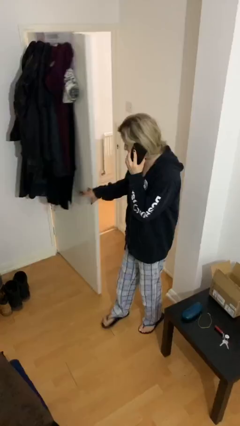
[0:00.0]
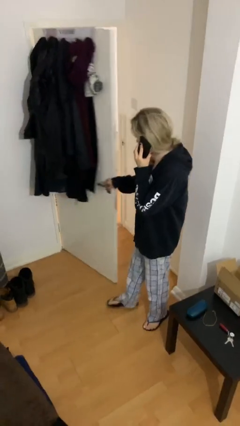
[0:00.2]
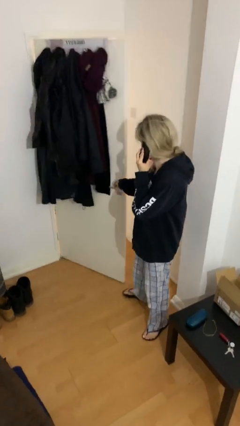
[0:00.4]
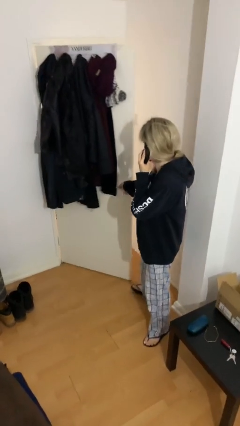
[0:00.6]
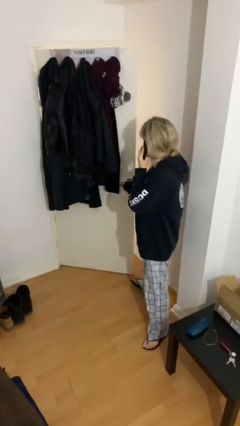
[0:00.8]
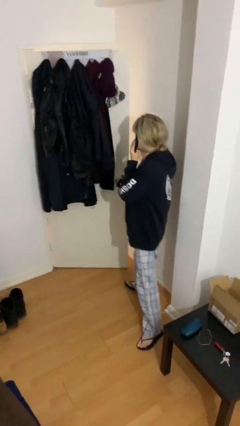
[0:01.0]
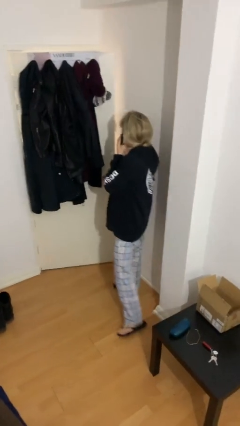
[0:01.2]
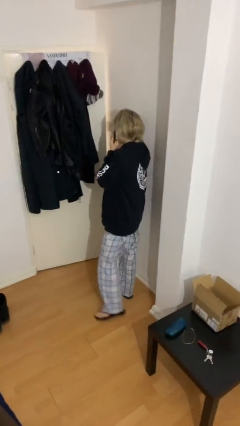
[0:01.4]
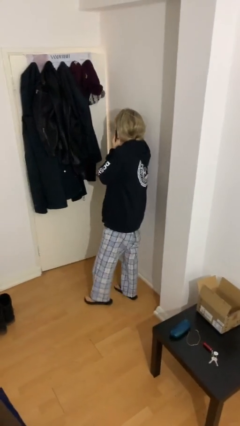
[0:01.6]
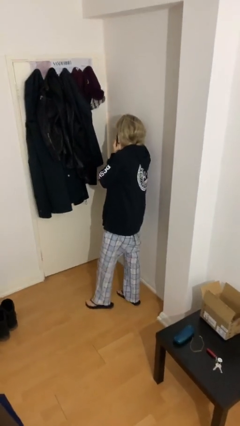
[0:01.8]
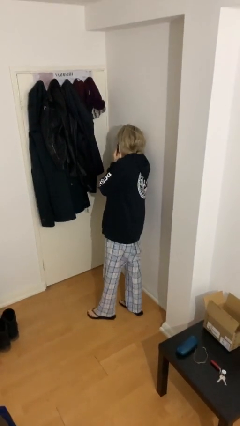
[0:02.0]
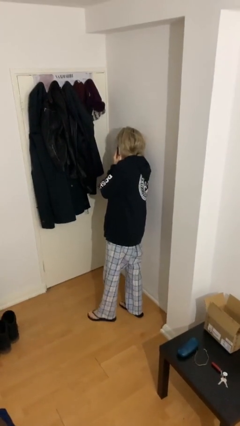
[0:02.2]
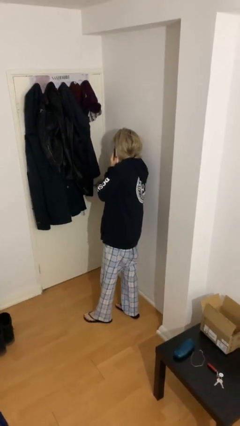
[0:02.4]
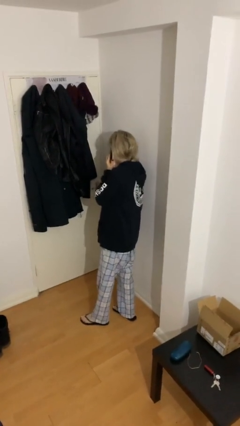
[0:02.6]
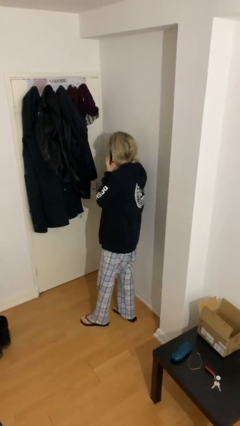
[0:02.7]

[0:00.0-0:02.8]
person closes facility door

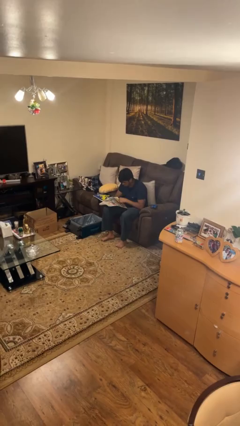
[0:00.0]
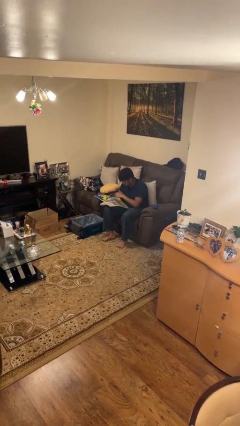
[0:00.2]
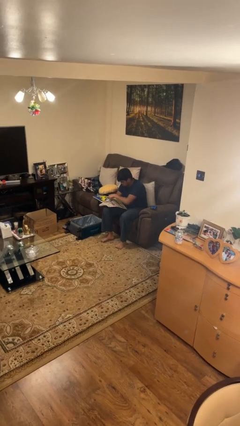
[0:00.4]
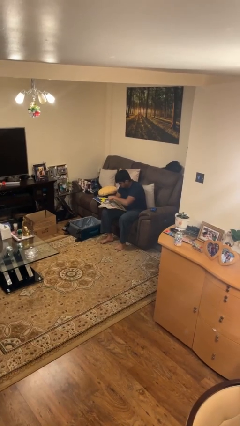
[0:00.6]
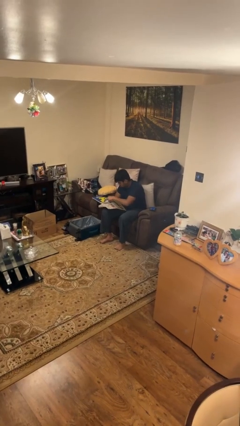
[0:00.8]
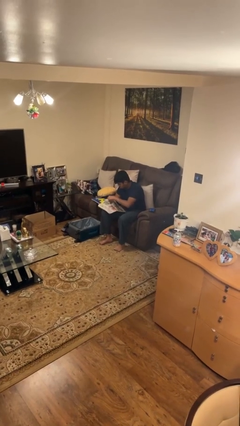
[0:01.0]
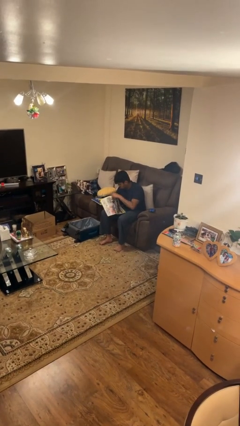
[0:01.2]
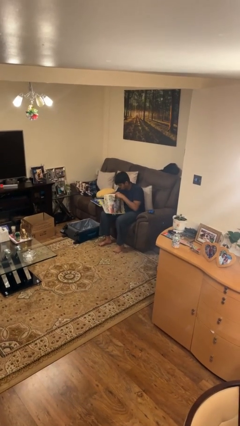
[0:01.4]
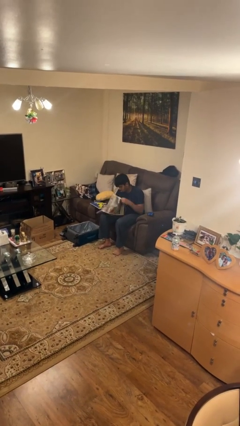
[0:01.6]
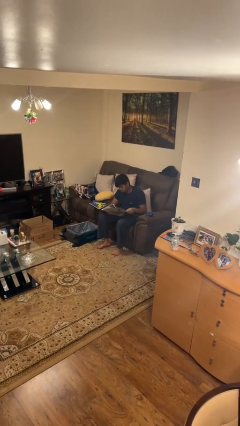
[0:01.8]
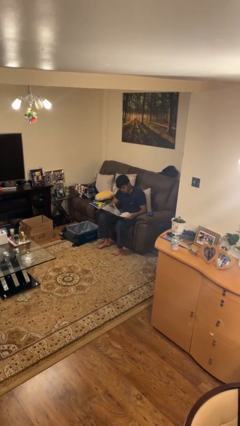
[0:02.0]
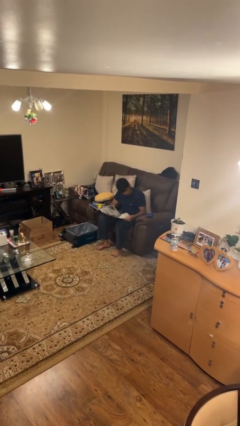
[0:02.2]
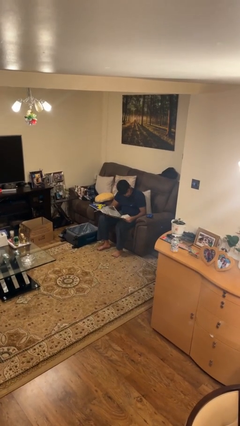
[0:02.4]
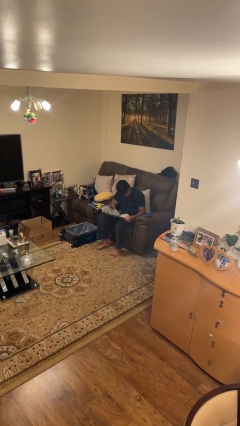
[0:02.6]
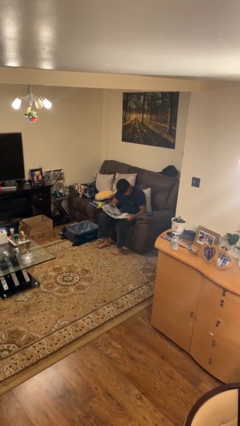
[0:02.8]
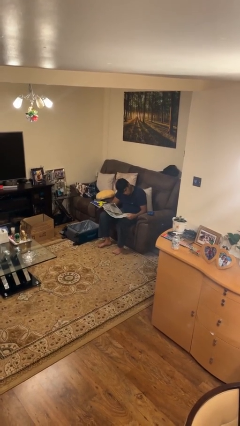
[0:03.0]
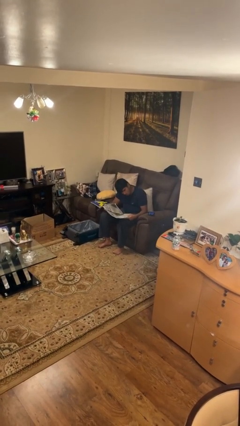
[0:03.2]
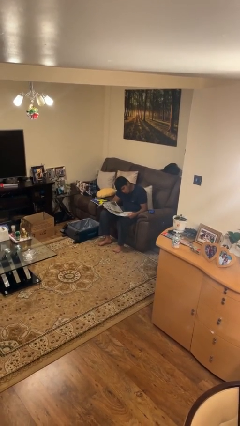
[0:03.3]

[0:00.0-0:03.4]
person reads newspaper

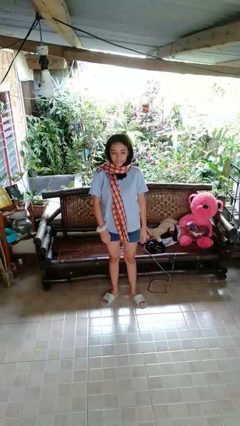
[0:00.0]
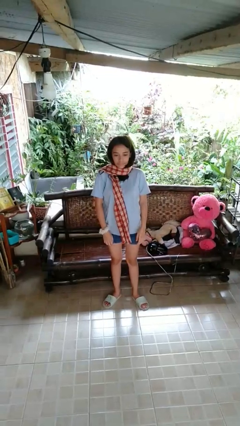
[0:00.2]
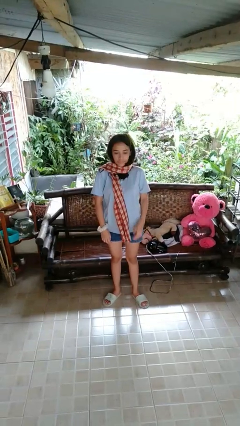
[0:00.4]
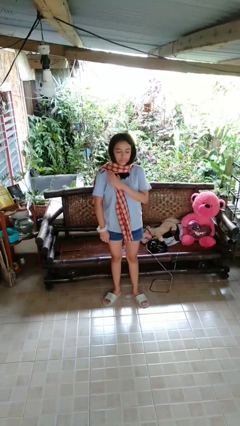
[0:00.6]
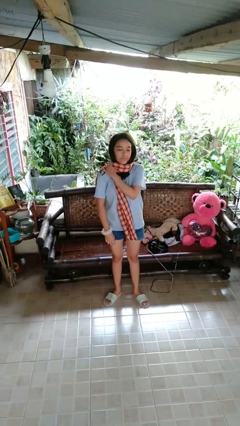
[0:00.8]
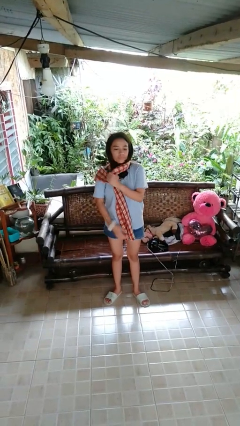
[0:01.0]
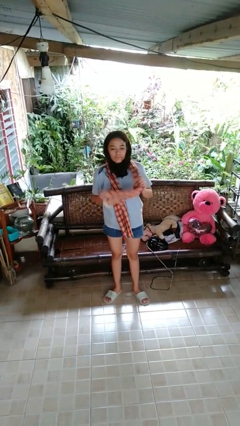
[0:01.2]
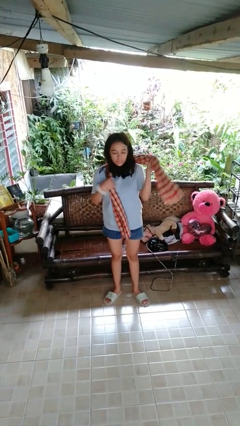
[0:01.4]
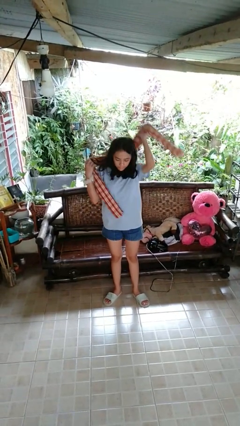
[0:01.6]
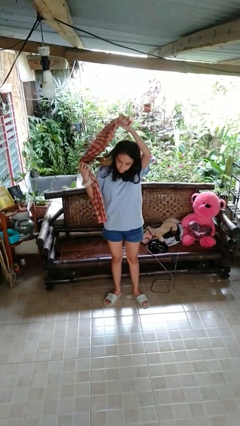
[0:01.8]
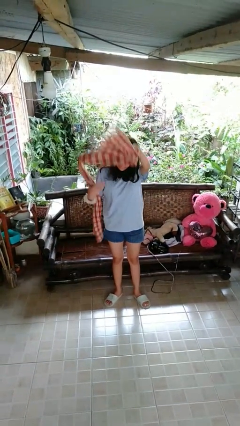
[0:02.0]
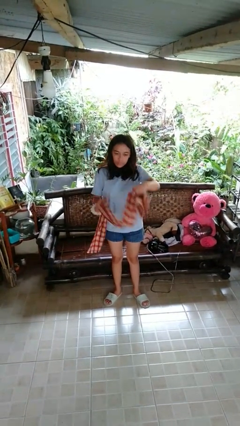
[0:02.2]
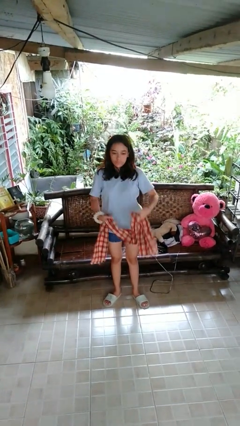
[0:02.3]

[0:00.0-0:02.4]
person takes off scarf

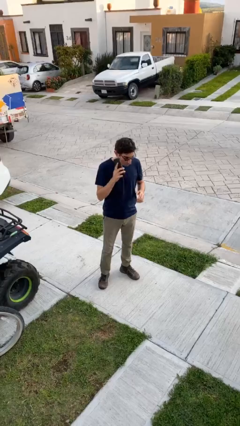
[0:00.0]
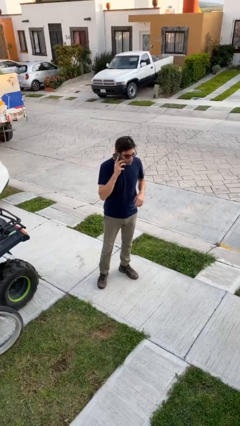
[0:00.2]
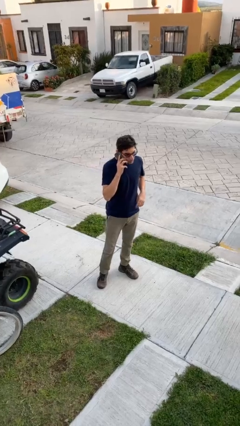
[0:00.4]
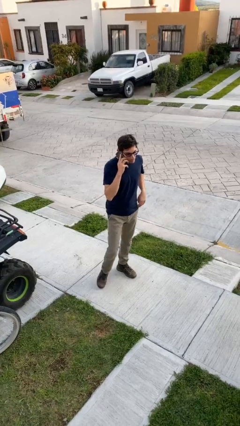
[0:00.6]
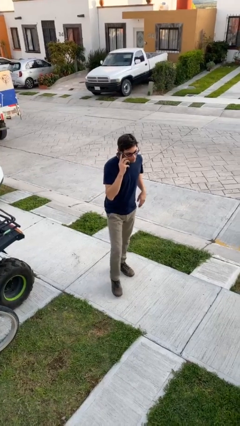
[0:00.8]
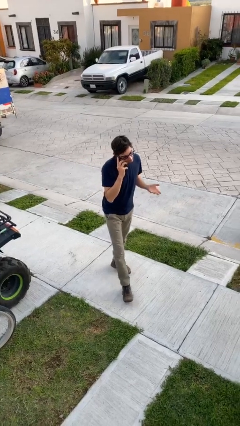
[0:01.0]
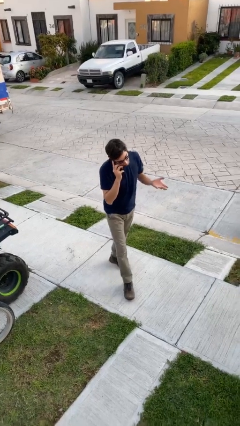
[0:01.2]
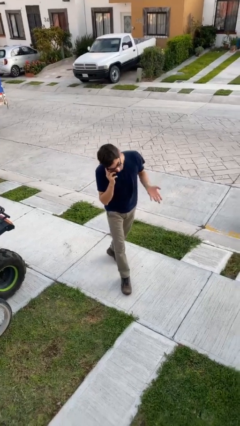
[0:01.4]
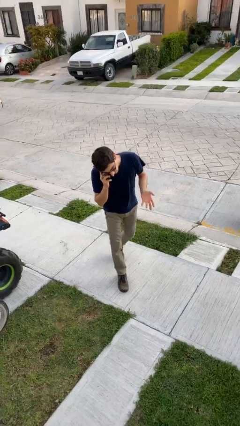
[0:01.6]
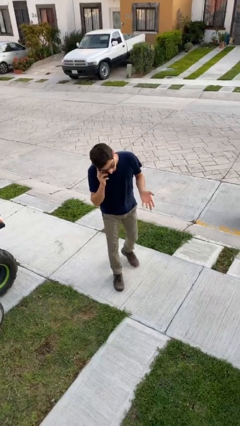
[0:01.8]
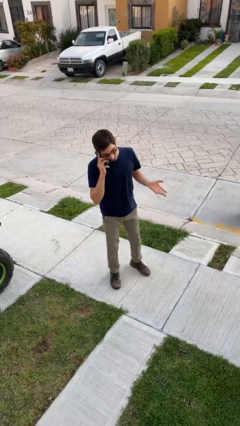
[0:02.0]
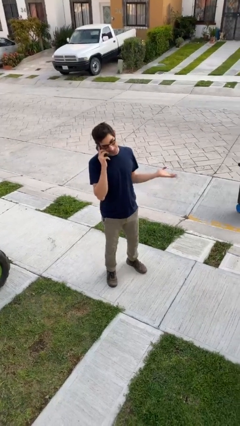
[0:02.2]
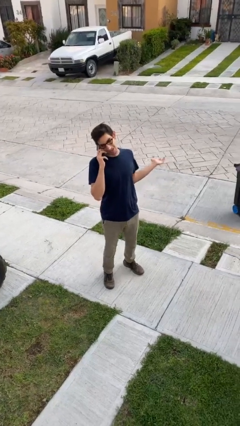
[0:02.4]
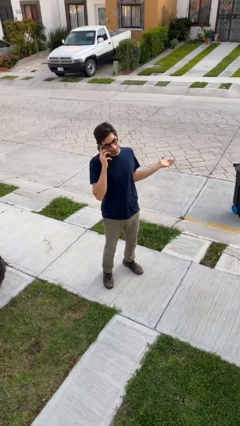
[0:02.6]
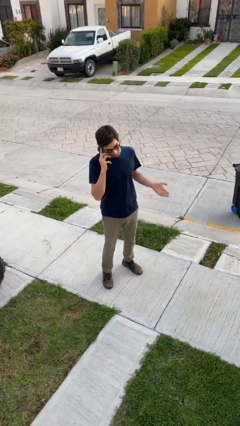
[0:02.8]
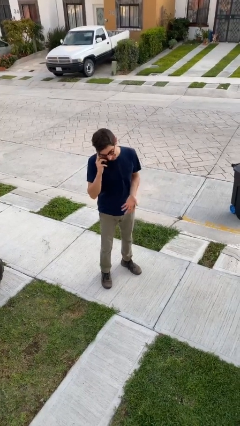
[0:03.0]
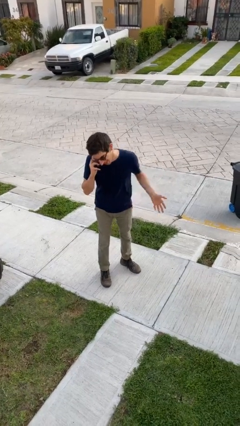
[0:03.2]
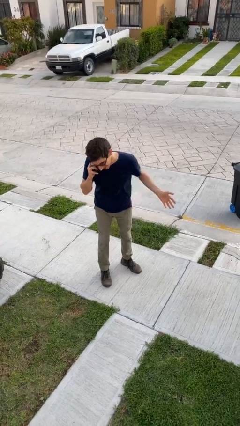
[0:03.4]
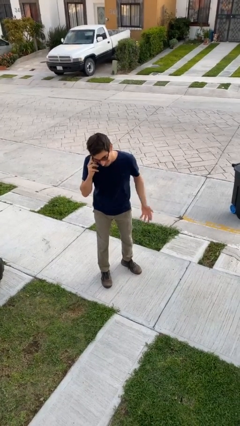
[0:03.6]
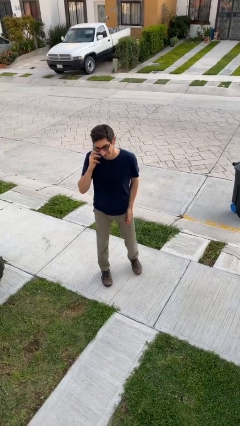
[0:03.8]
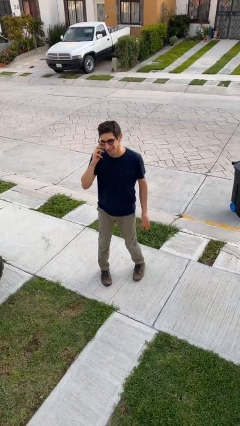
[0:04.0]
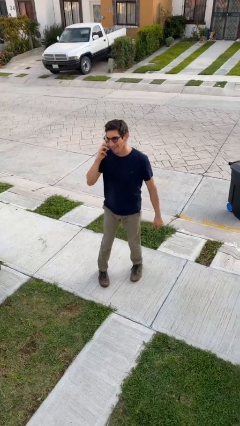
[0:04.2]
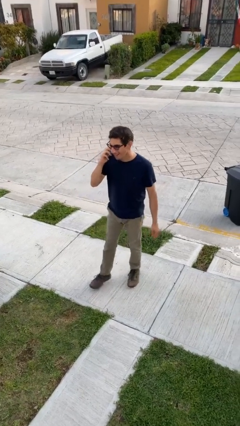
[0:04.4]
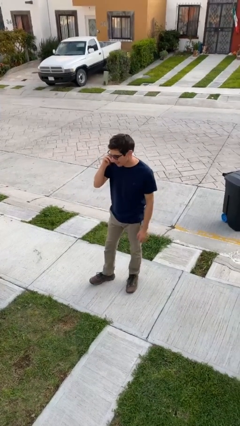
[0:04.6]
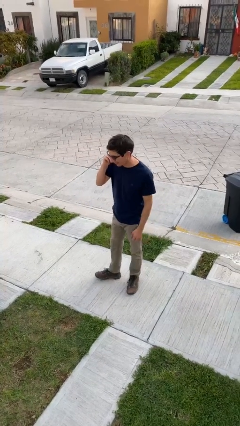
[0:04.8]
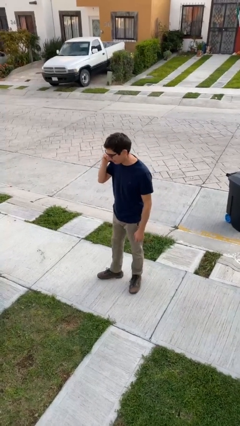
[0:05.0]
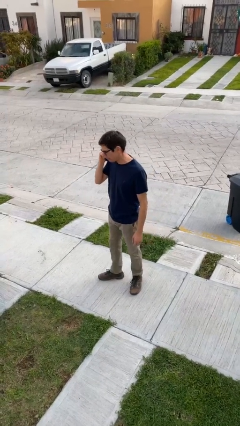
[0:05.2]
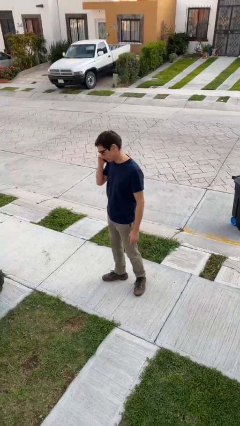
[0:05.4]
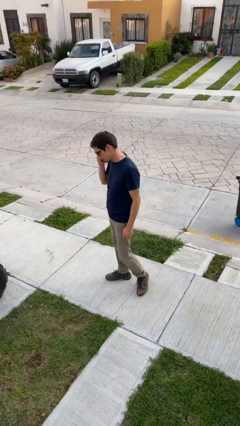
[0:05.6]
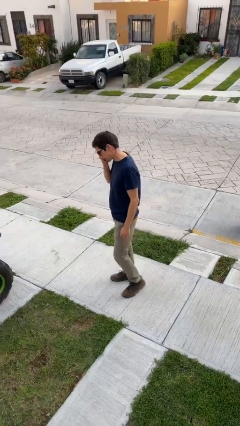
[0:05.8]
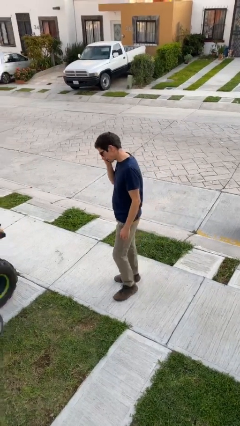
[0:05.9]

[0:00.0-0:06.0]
person talks on phone

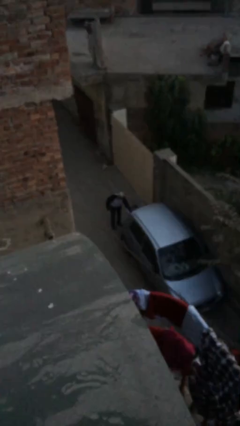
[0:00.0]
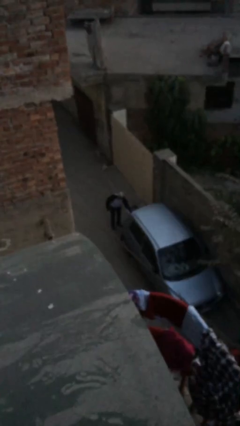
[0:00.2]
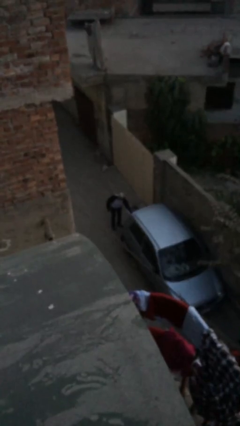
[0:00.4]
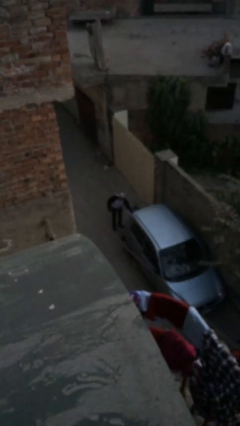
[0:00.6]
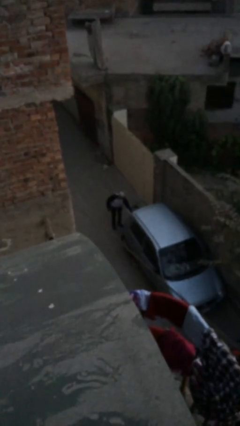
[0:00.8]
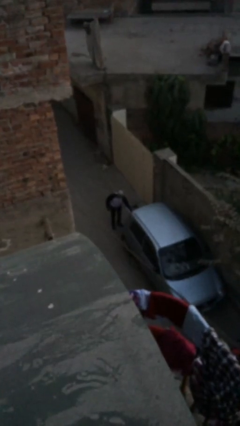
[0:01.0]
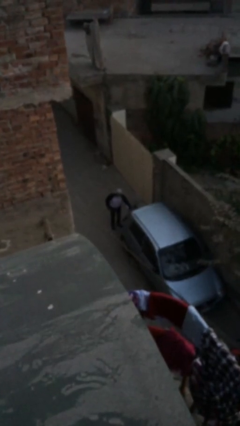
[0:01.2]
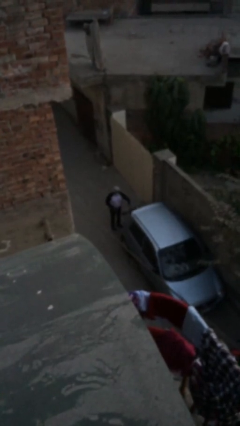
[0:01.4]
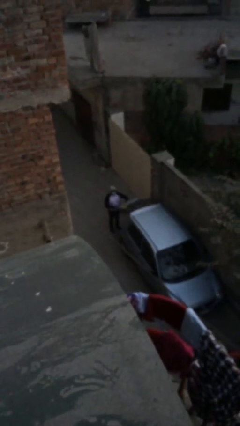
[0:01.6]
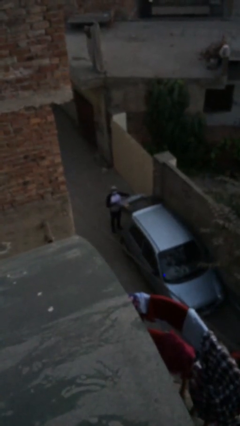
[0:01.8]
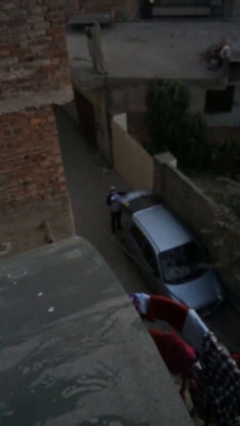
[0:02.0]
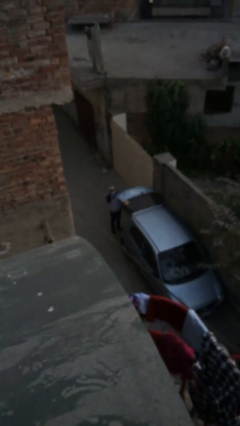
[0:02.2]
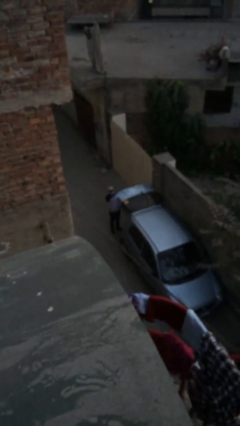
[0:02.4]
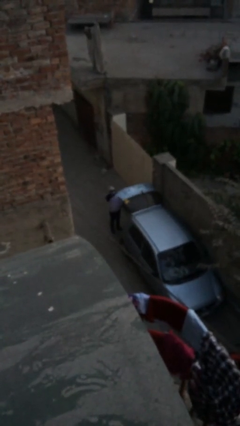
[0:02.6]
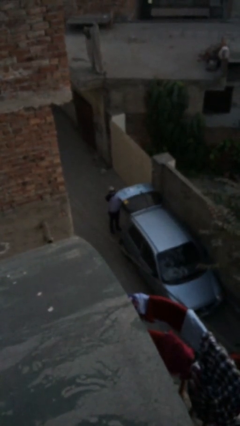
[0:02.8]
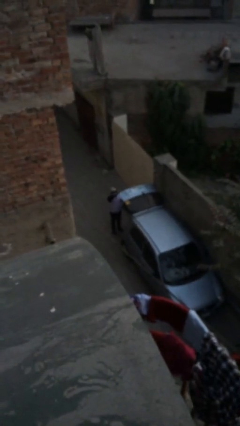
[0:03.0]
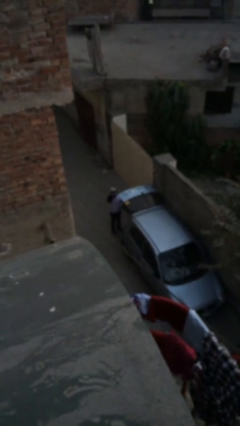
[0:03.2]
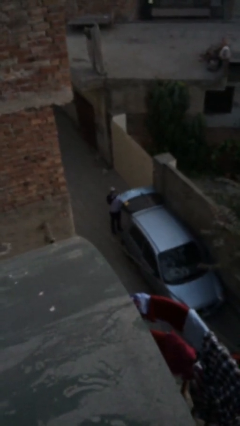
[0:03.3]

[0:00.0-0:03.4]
person opens car trunk
